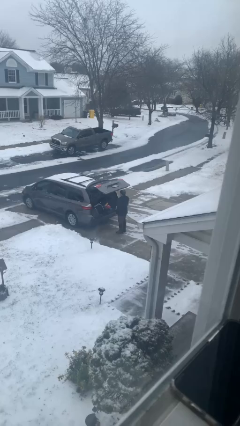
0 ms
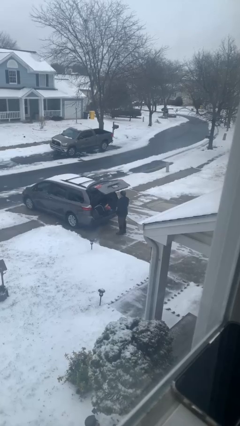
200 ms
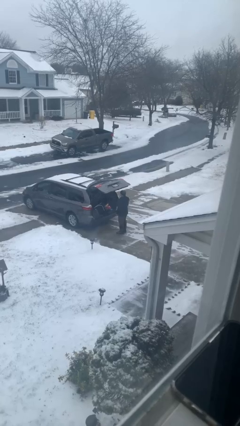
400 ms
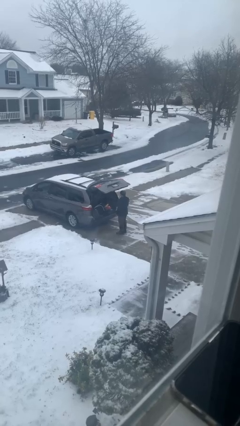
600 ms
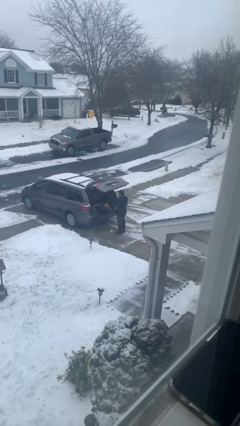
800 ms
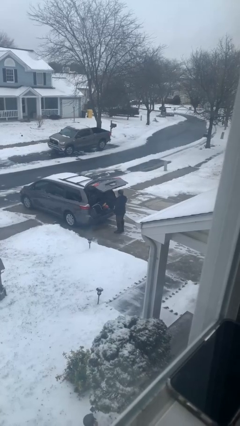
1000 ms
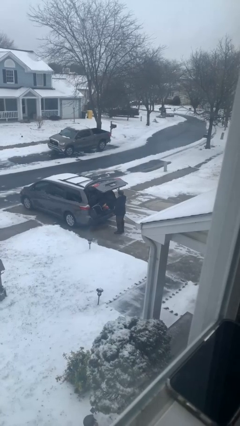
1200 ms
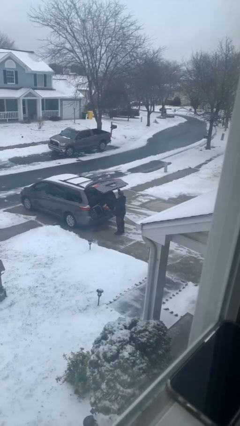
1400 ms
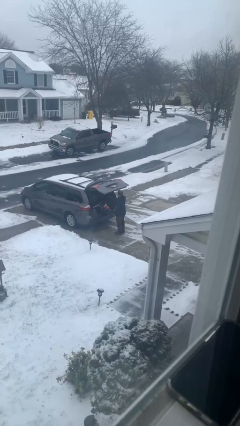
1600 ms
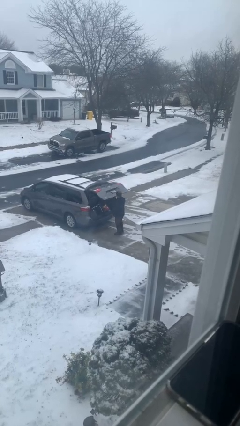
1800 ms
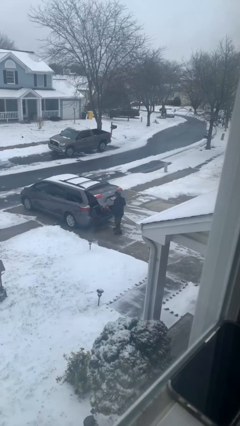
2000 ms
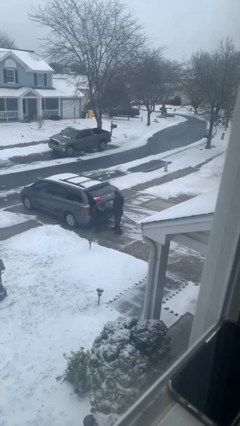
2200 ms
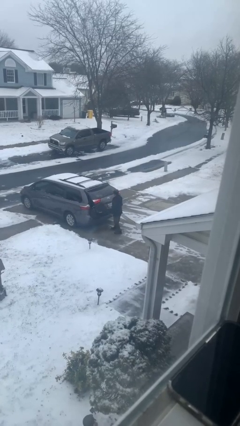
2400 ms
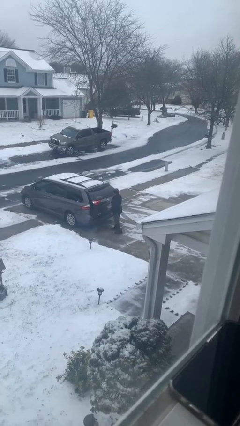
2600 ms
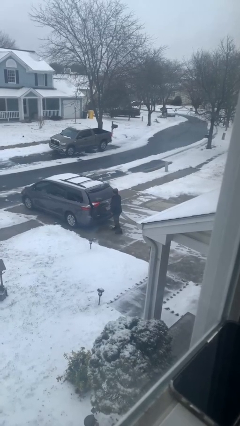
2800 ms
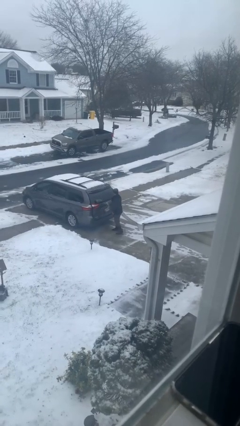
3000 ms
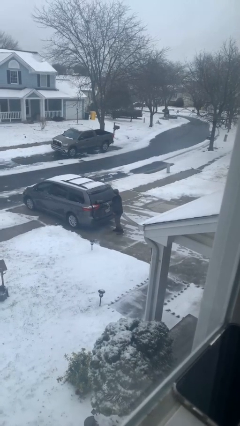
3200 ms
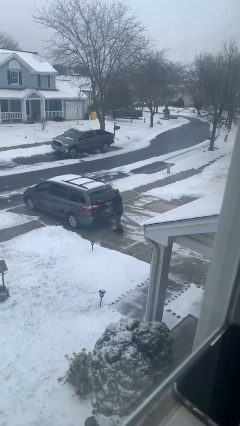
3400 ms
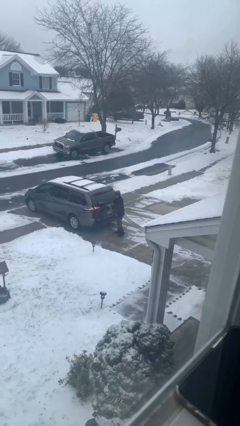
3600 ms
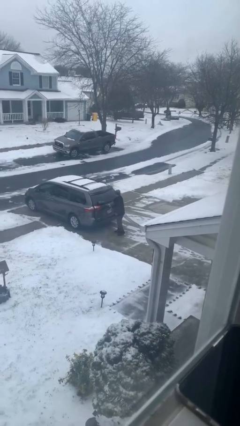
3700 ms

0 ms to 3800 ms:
person closes car trunk

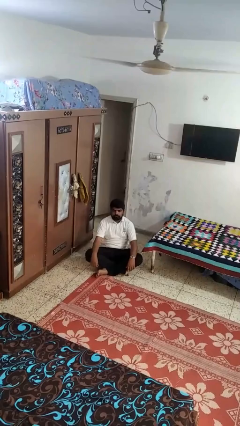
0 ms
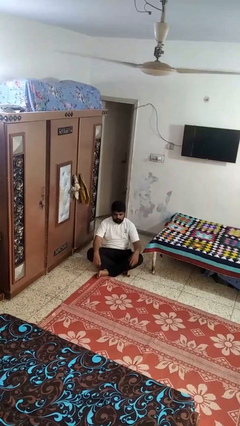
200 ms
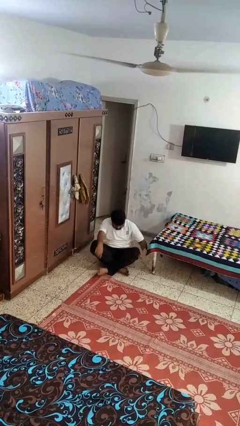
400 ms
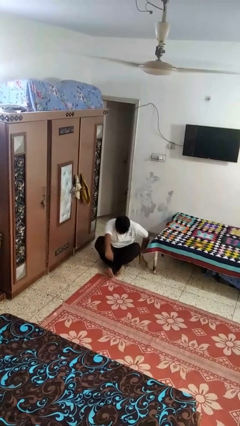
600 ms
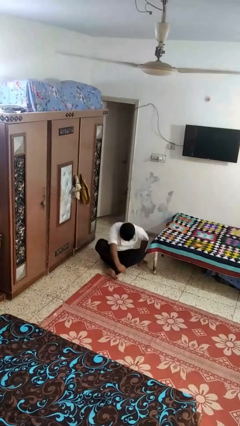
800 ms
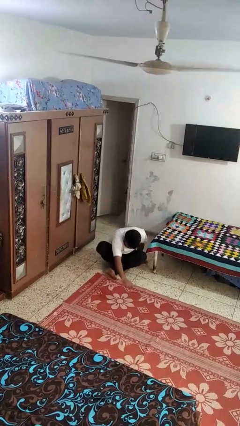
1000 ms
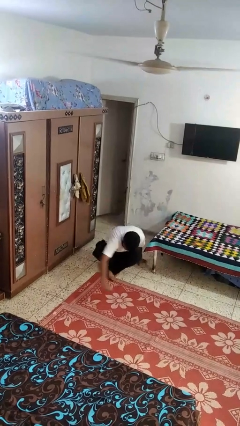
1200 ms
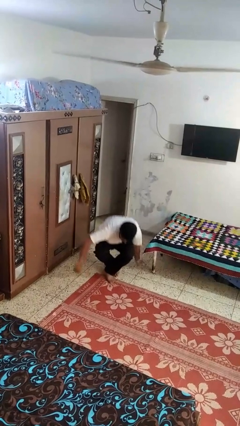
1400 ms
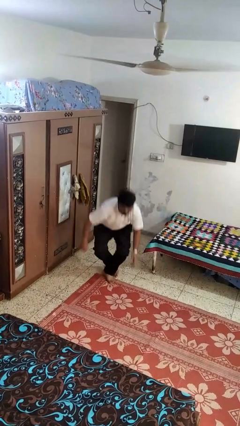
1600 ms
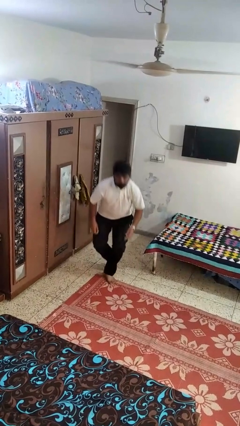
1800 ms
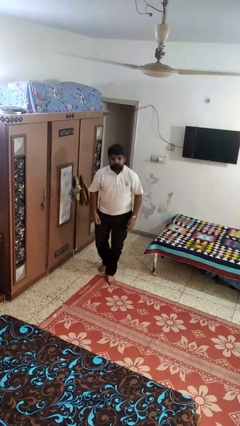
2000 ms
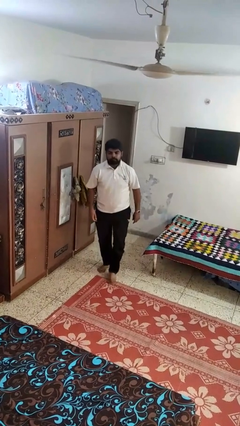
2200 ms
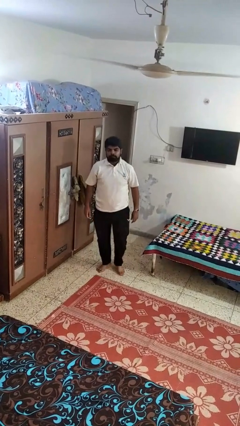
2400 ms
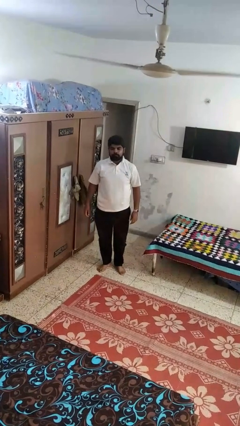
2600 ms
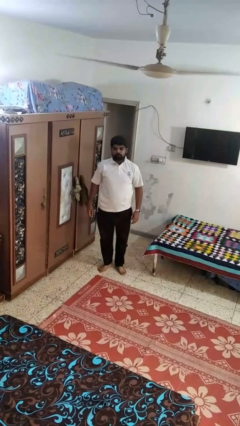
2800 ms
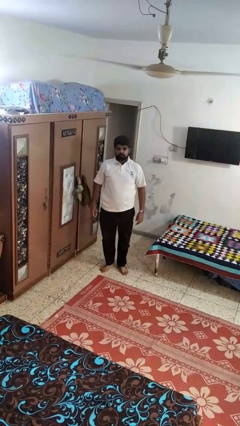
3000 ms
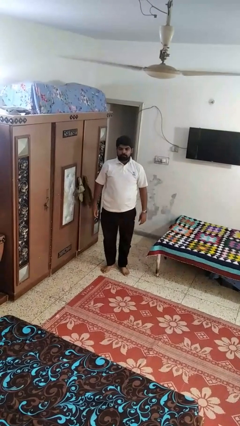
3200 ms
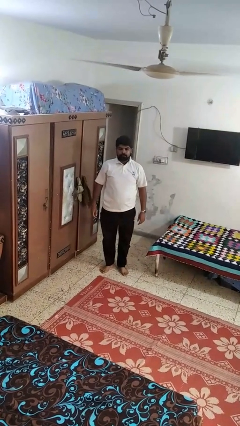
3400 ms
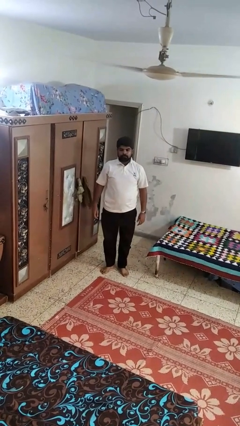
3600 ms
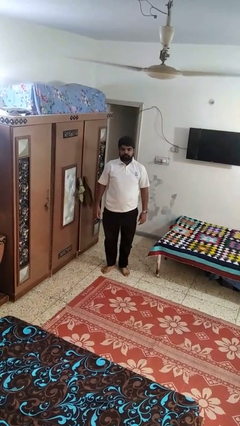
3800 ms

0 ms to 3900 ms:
person stands up from floor

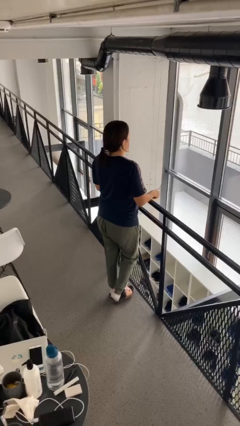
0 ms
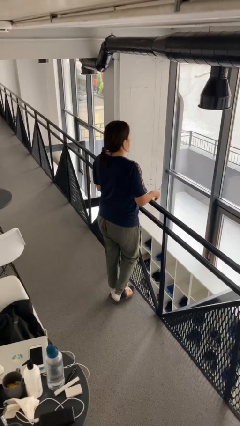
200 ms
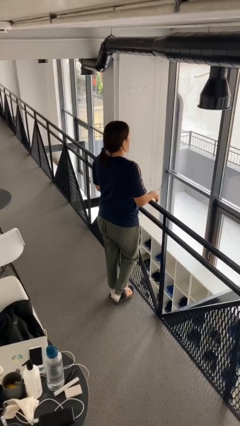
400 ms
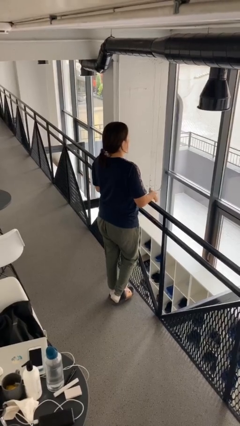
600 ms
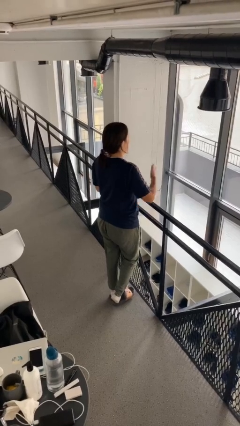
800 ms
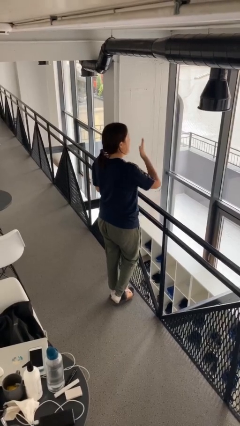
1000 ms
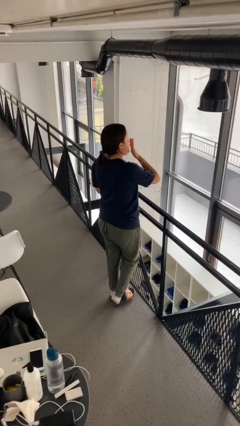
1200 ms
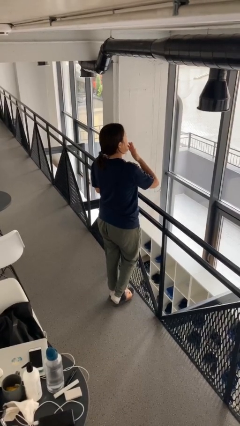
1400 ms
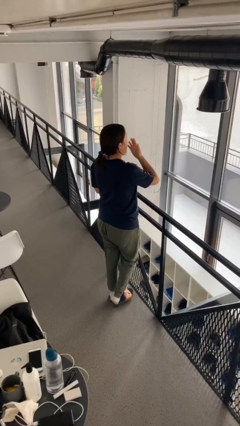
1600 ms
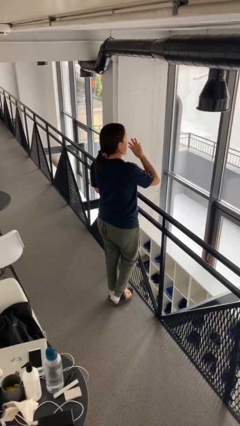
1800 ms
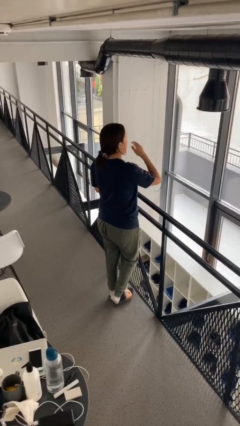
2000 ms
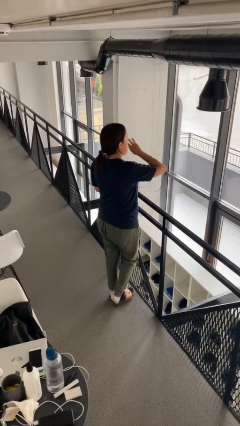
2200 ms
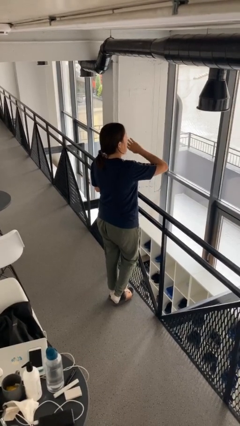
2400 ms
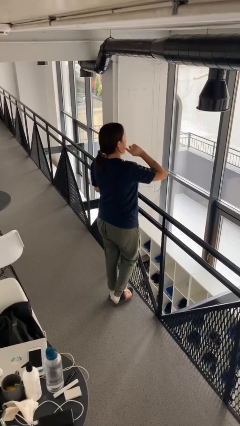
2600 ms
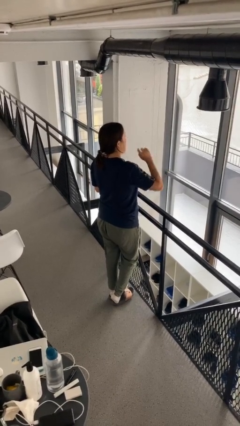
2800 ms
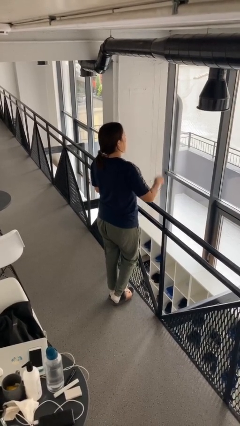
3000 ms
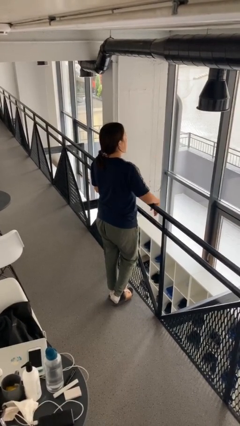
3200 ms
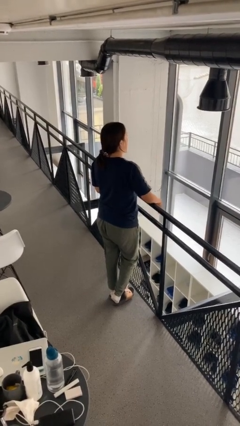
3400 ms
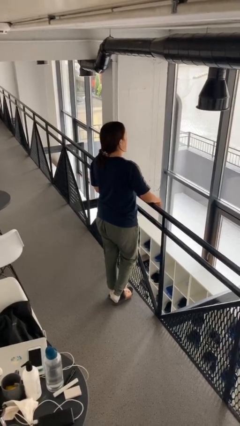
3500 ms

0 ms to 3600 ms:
person licks fingers

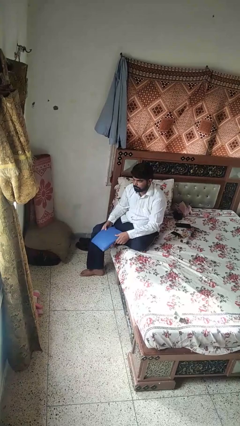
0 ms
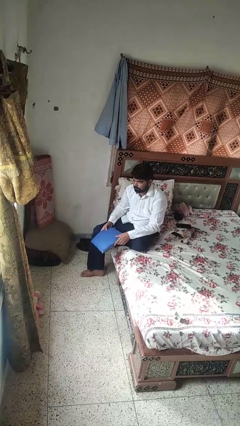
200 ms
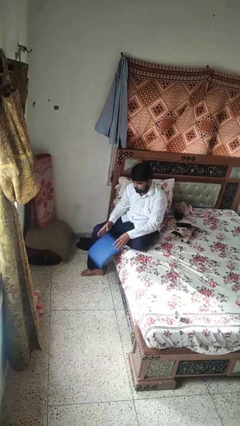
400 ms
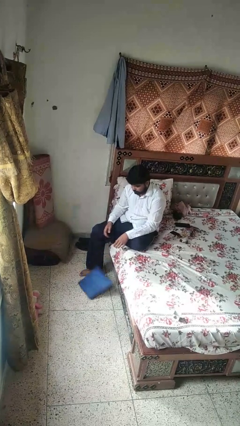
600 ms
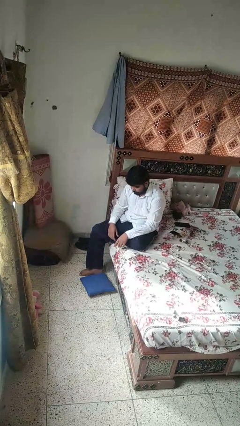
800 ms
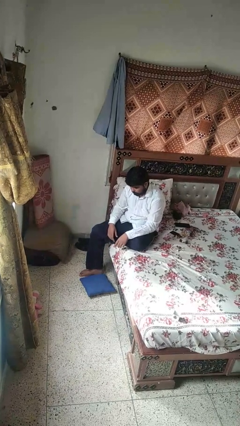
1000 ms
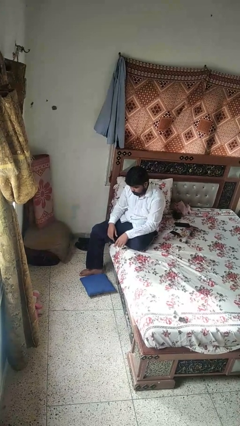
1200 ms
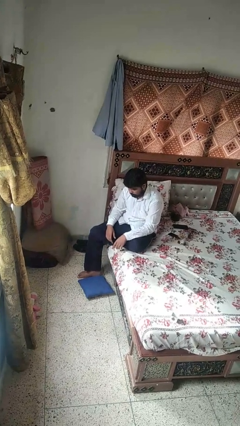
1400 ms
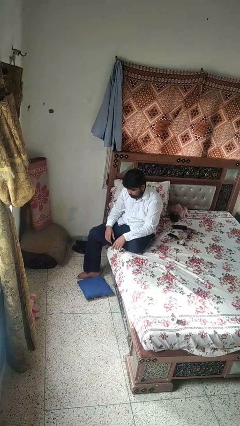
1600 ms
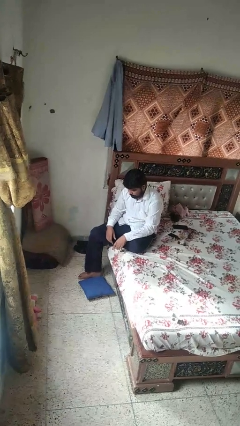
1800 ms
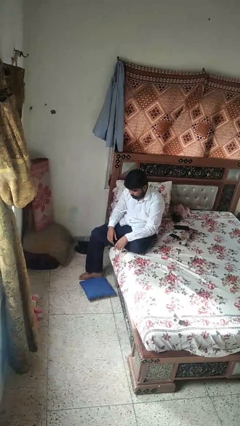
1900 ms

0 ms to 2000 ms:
person drops object

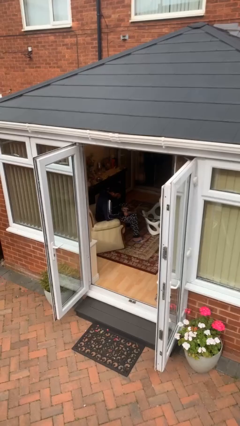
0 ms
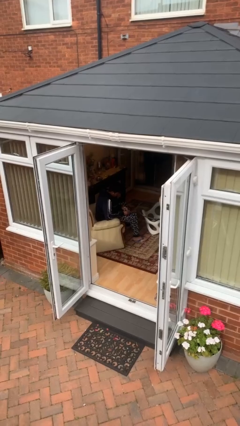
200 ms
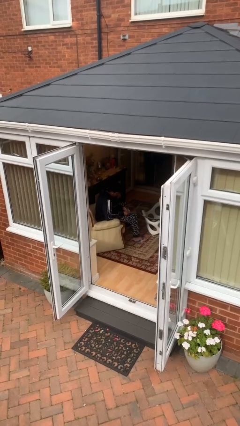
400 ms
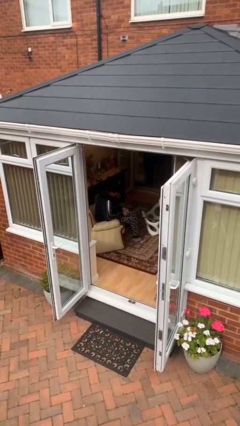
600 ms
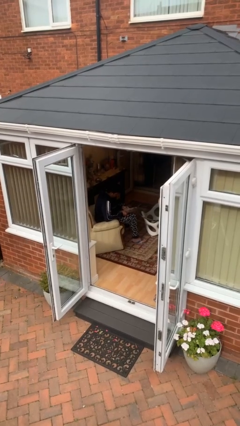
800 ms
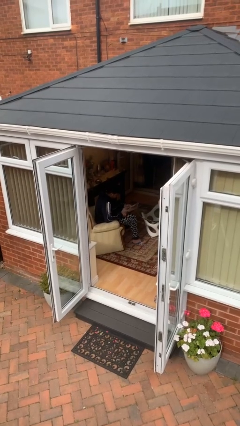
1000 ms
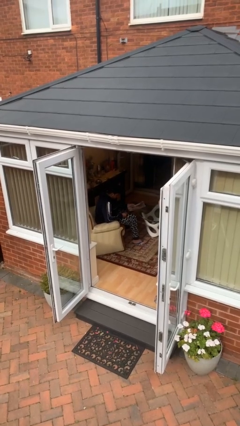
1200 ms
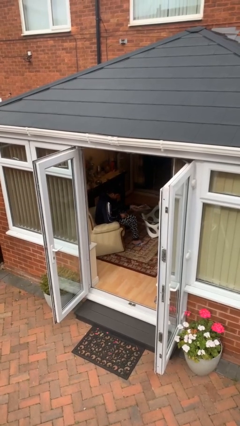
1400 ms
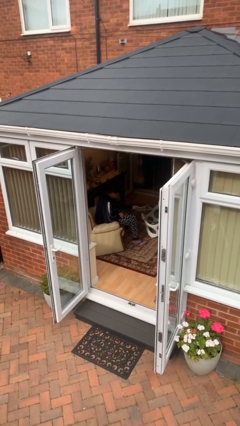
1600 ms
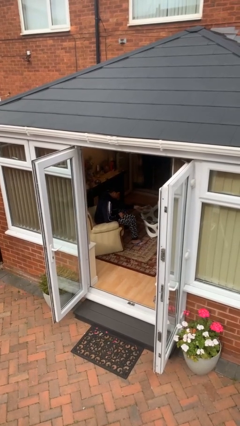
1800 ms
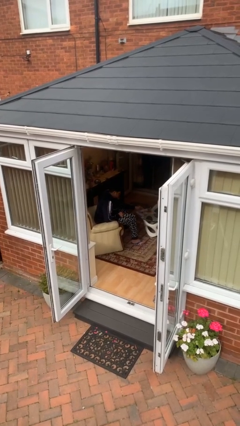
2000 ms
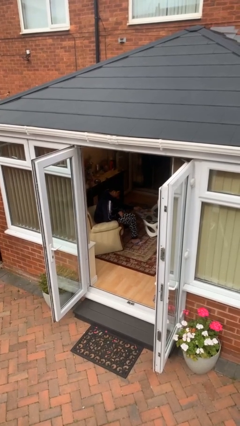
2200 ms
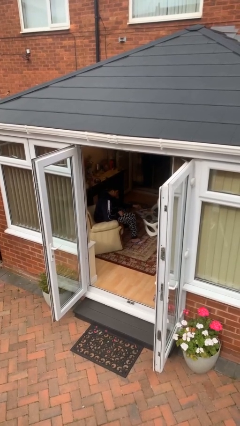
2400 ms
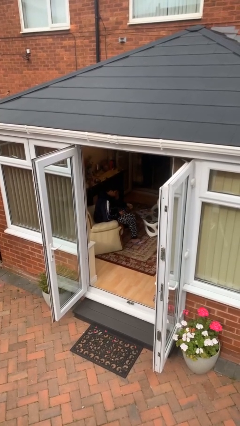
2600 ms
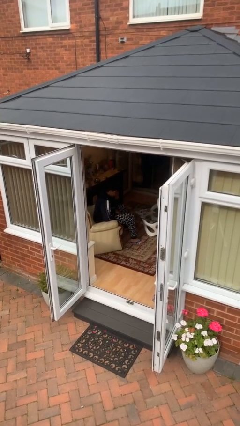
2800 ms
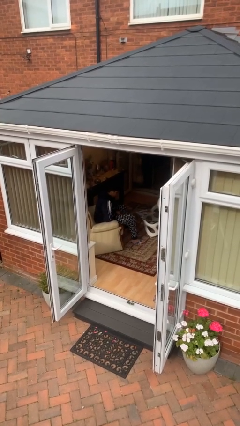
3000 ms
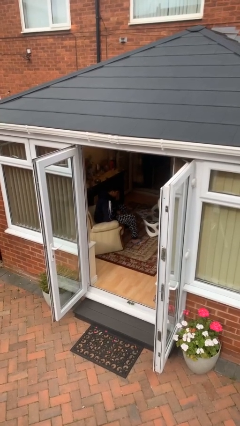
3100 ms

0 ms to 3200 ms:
person puts down object on table

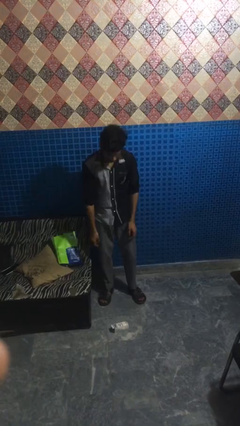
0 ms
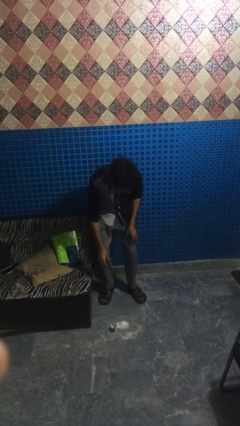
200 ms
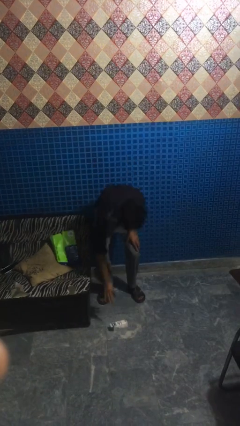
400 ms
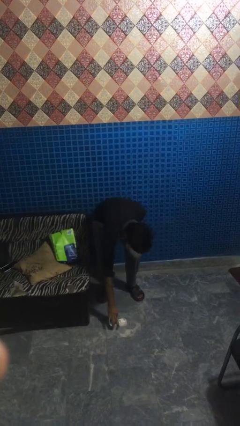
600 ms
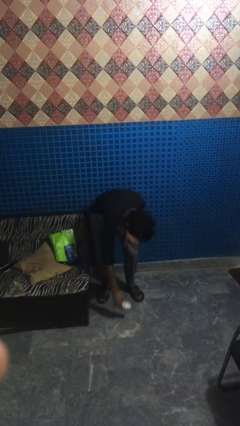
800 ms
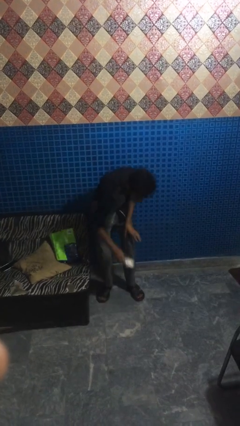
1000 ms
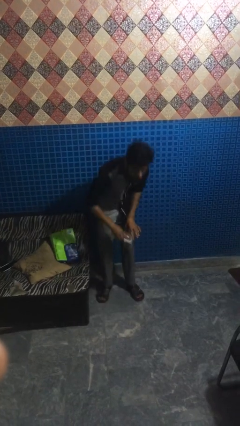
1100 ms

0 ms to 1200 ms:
person picks up object from floor
